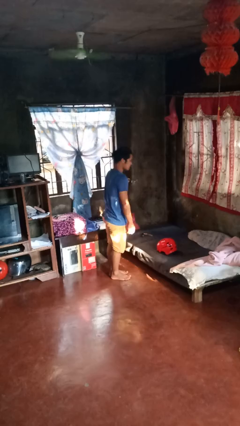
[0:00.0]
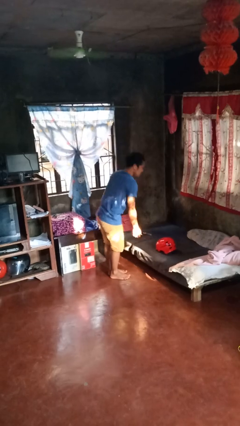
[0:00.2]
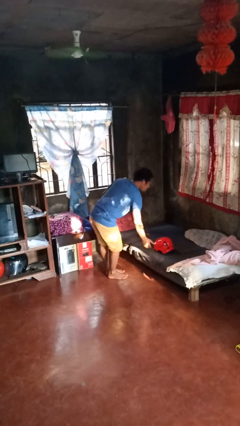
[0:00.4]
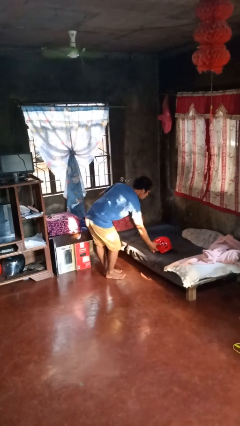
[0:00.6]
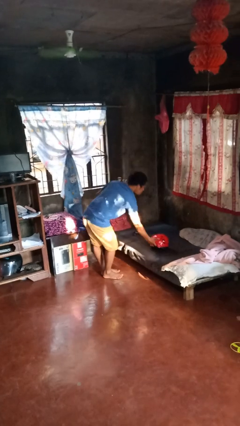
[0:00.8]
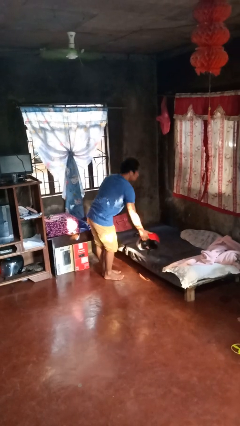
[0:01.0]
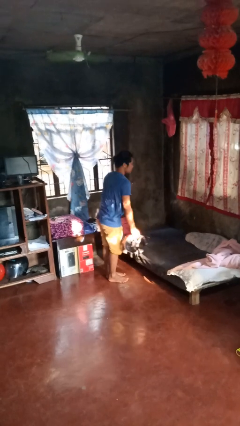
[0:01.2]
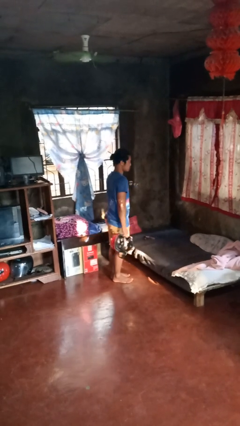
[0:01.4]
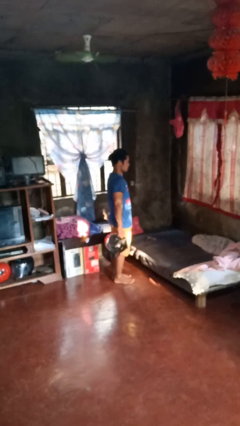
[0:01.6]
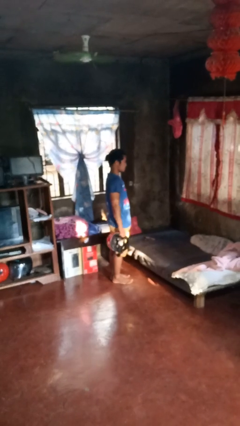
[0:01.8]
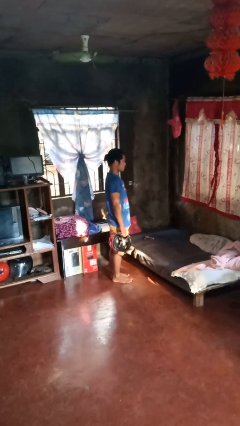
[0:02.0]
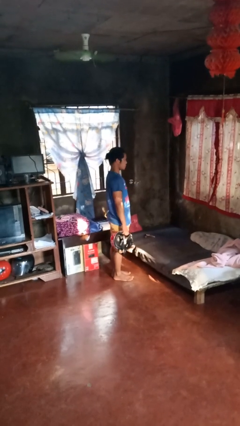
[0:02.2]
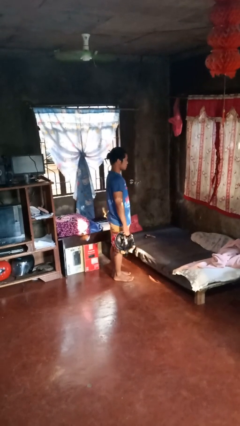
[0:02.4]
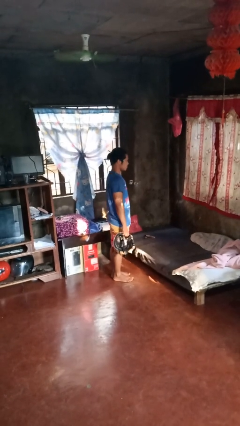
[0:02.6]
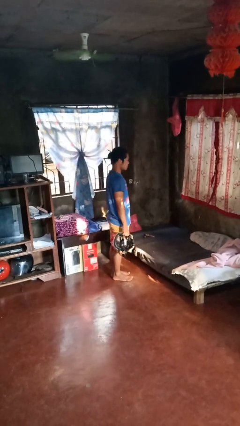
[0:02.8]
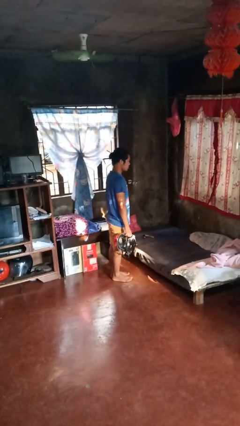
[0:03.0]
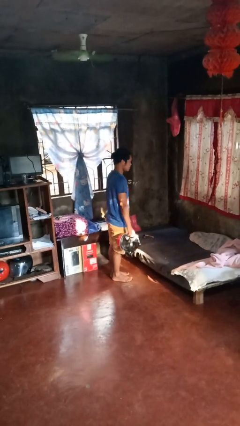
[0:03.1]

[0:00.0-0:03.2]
person picks up object from bed

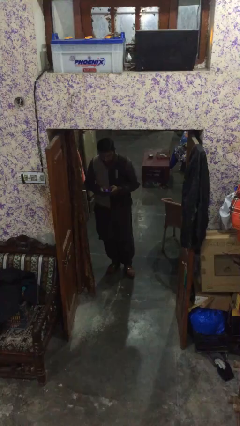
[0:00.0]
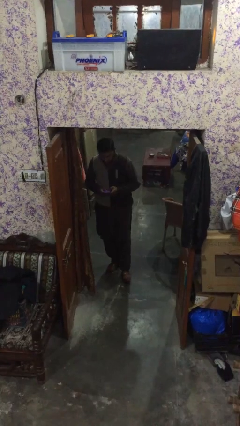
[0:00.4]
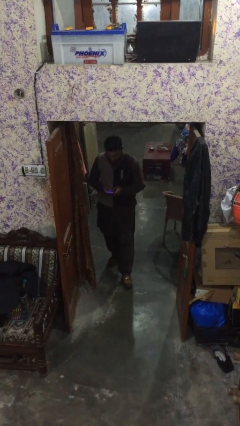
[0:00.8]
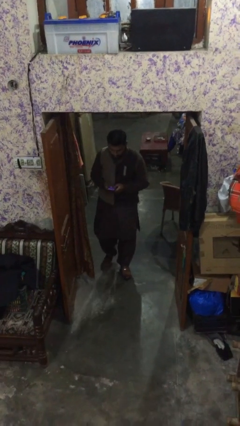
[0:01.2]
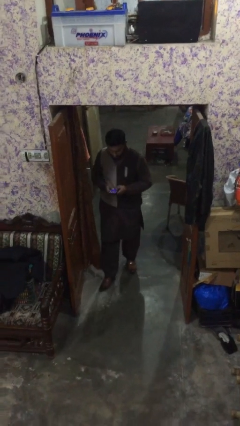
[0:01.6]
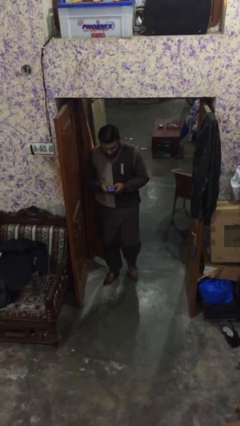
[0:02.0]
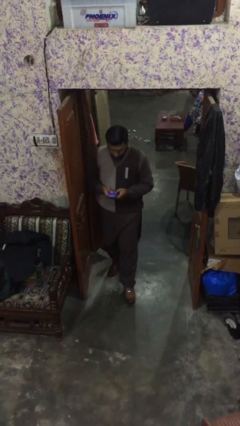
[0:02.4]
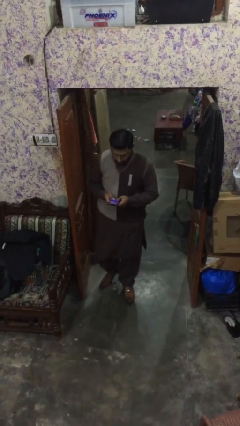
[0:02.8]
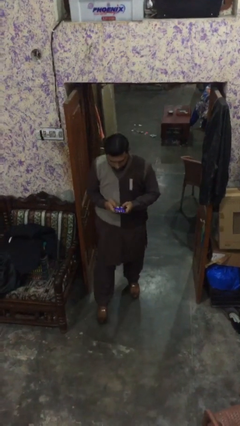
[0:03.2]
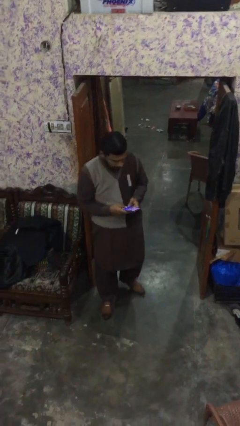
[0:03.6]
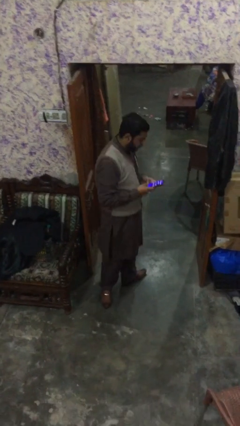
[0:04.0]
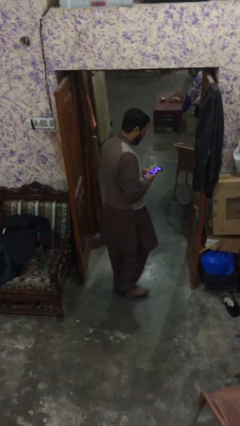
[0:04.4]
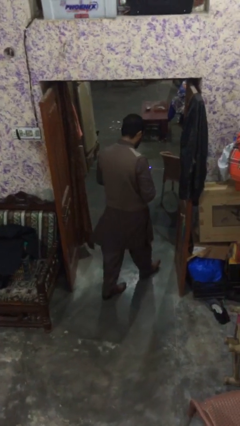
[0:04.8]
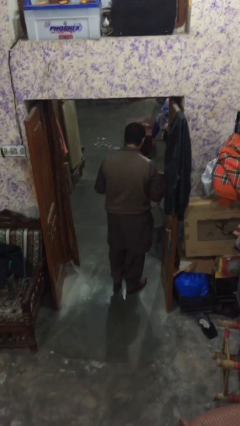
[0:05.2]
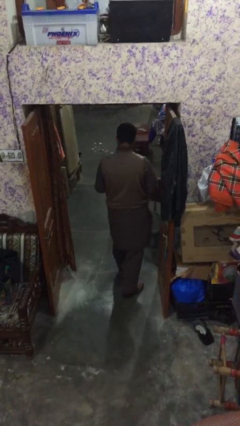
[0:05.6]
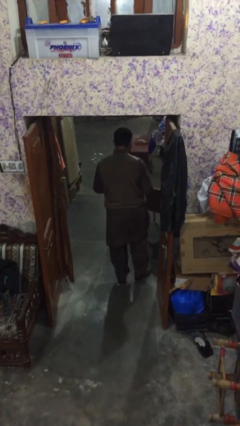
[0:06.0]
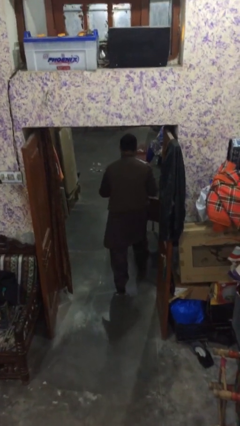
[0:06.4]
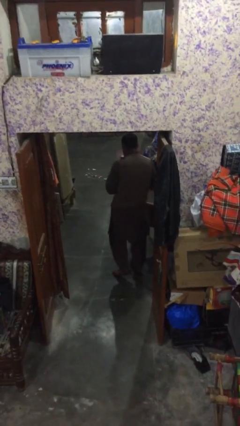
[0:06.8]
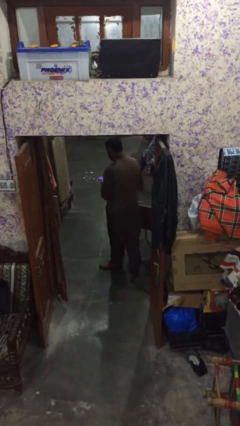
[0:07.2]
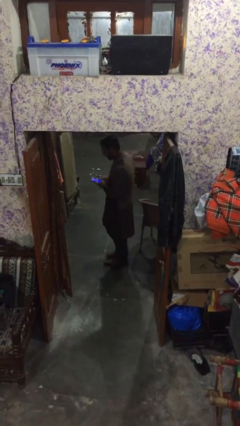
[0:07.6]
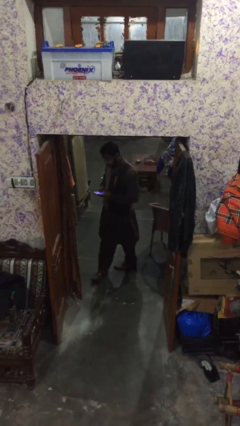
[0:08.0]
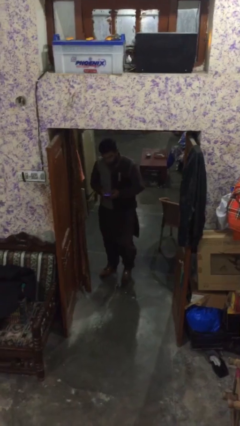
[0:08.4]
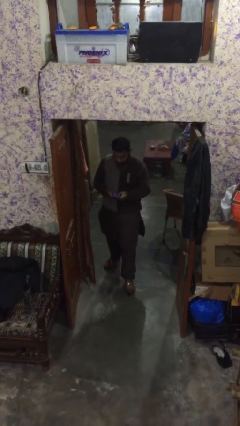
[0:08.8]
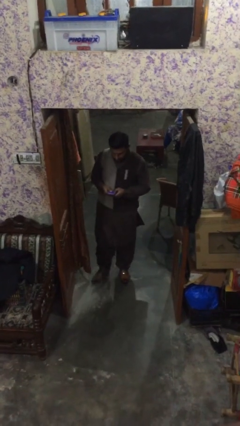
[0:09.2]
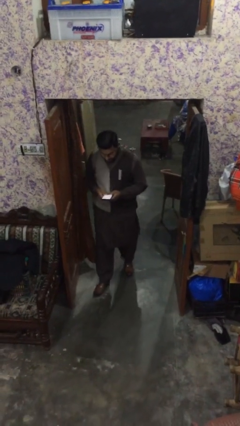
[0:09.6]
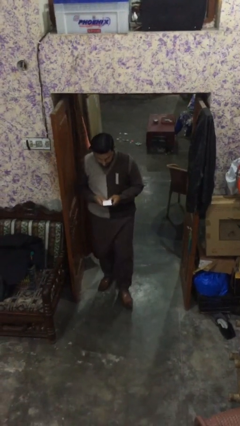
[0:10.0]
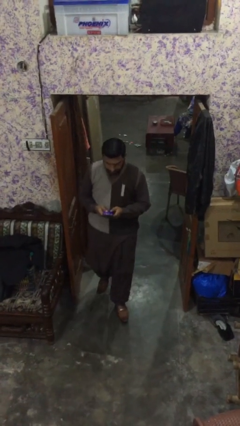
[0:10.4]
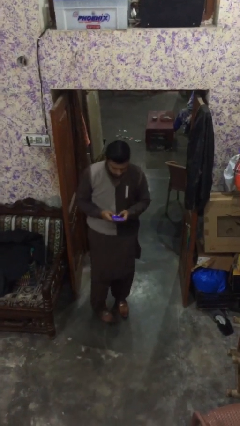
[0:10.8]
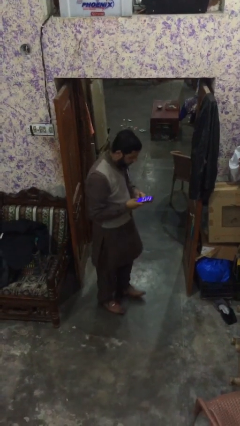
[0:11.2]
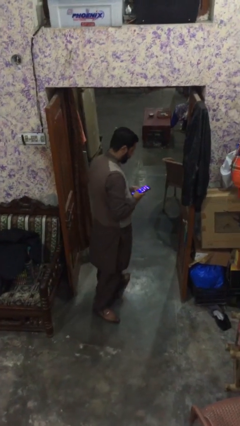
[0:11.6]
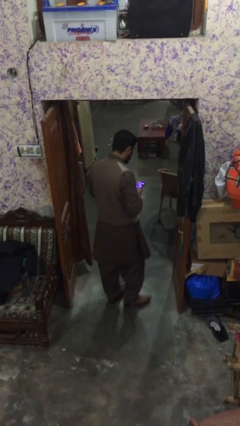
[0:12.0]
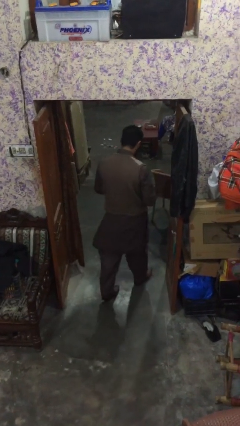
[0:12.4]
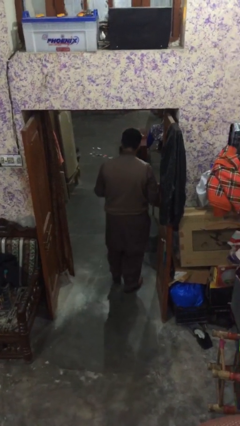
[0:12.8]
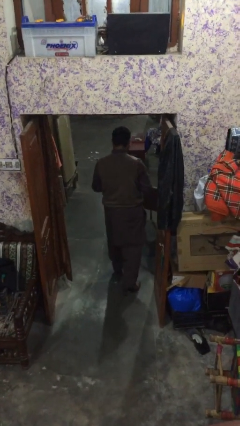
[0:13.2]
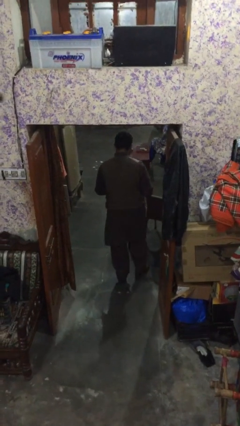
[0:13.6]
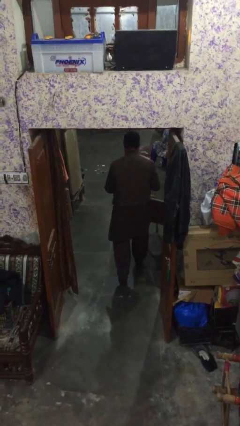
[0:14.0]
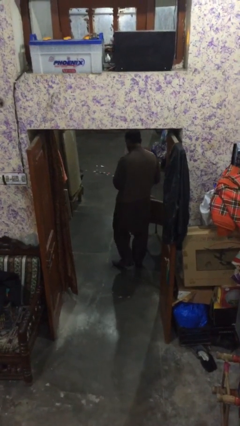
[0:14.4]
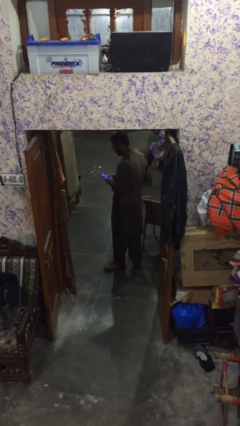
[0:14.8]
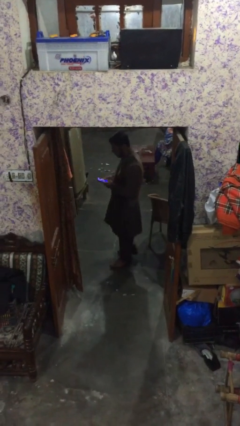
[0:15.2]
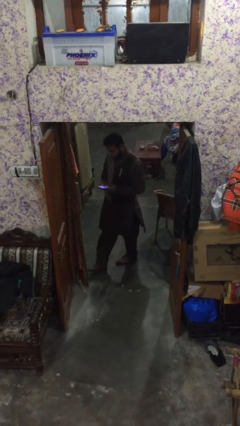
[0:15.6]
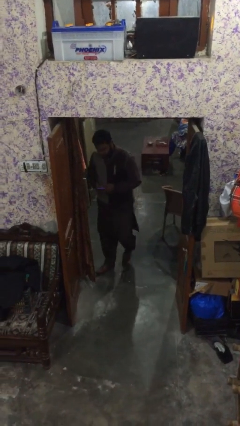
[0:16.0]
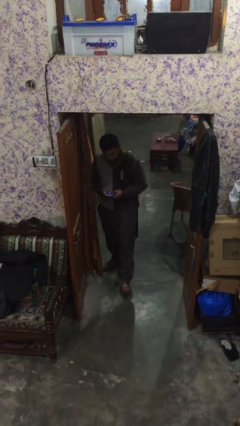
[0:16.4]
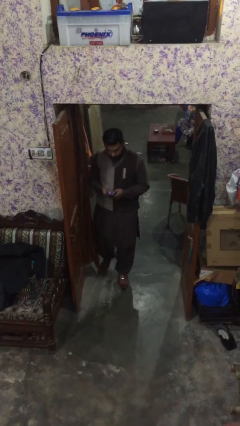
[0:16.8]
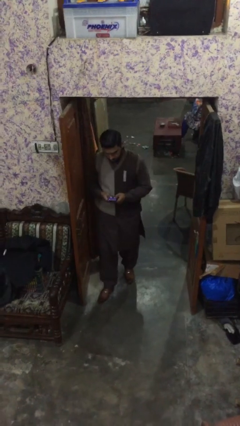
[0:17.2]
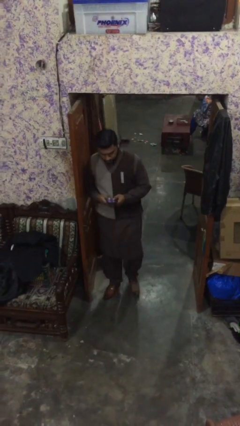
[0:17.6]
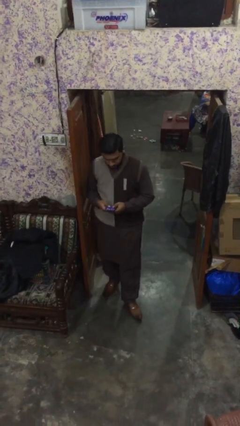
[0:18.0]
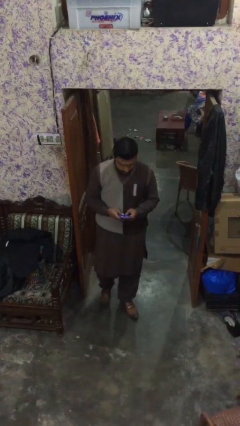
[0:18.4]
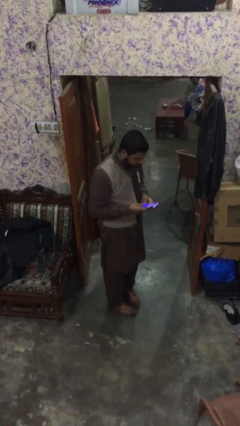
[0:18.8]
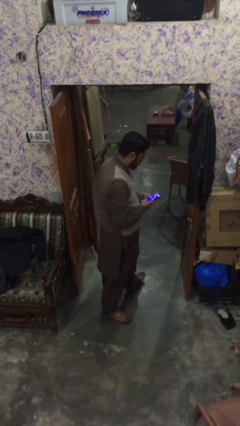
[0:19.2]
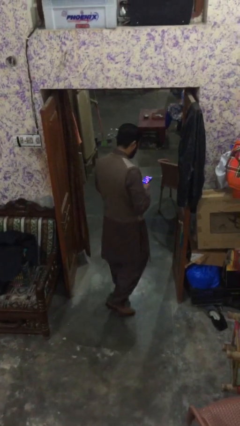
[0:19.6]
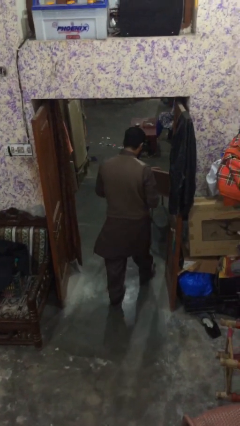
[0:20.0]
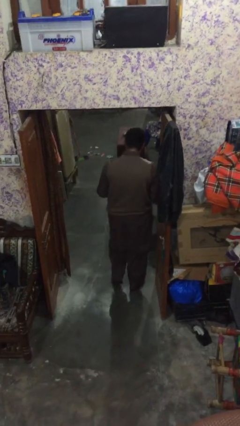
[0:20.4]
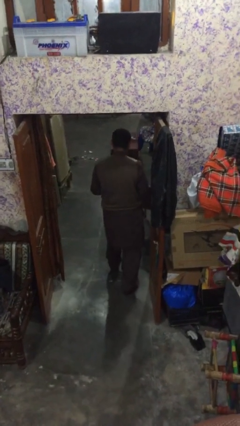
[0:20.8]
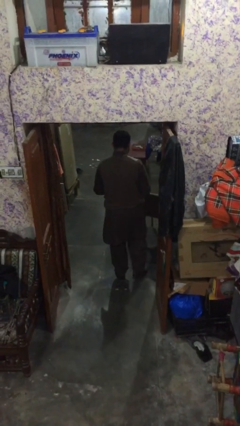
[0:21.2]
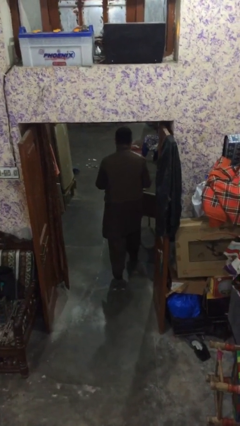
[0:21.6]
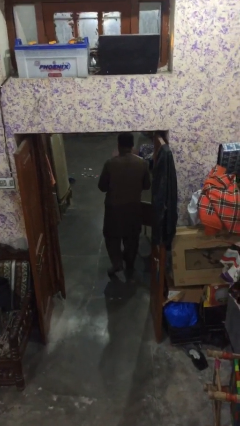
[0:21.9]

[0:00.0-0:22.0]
person texts on phone

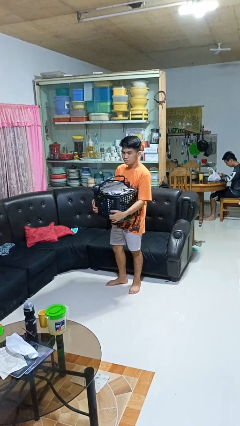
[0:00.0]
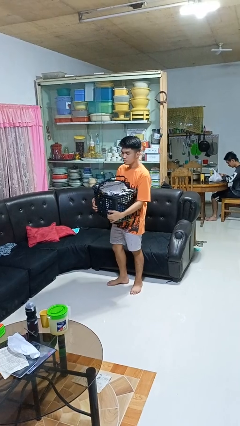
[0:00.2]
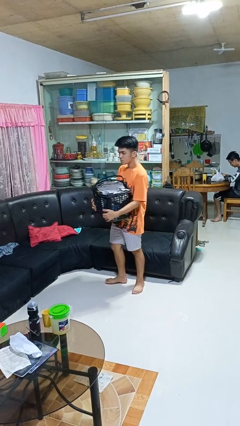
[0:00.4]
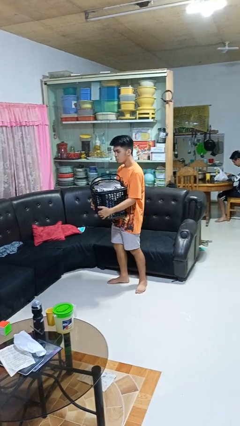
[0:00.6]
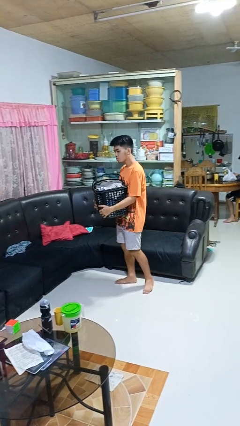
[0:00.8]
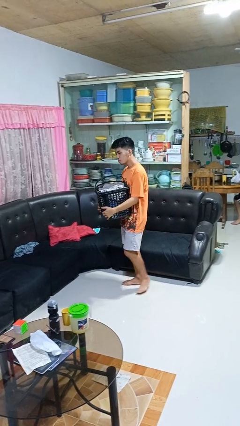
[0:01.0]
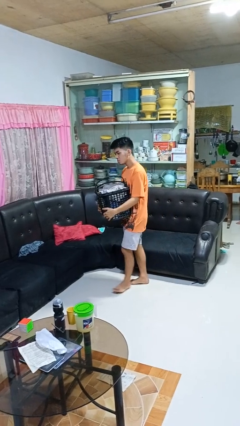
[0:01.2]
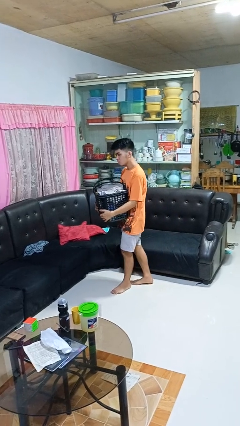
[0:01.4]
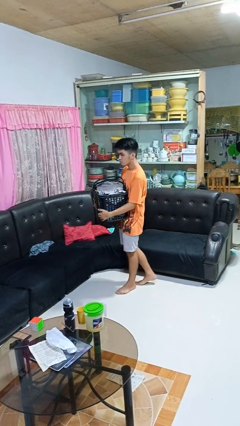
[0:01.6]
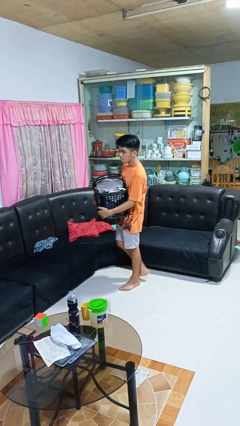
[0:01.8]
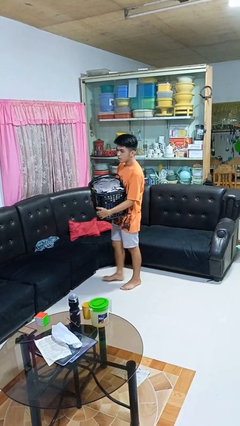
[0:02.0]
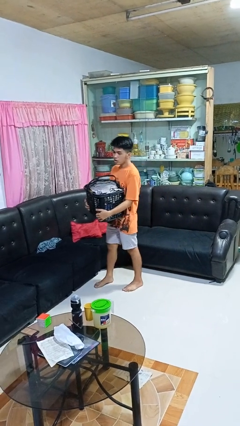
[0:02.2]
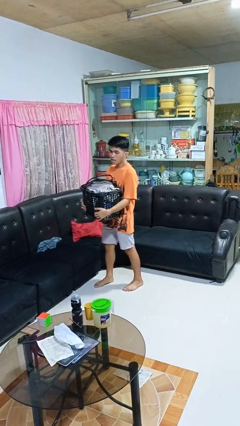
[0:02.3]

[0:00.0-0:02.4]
person carries laundry basket

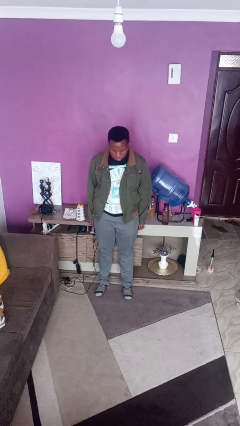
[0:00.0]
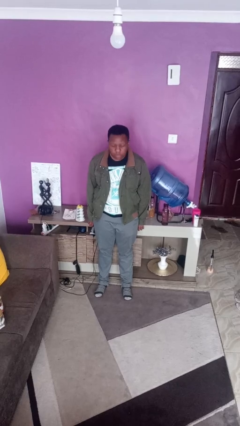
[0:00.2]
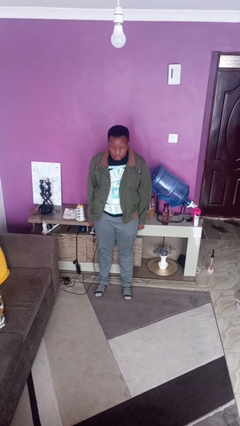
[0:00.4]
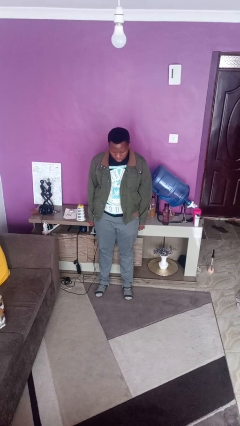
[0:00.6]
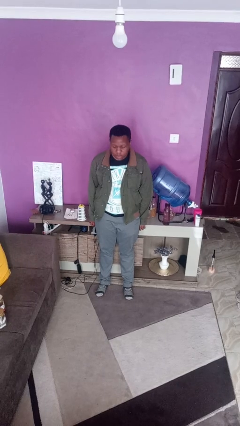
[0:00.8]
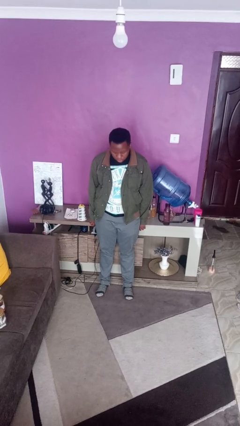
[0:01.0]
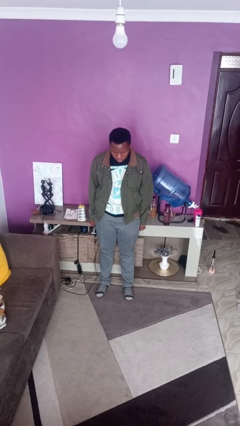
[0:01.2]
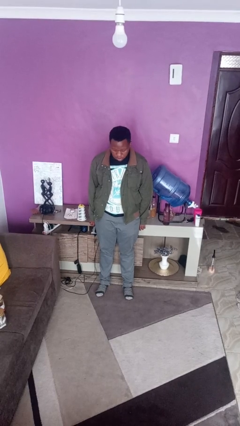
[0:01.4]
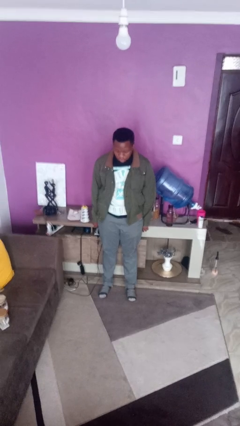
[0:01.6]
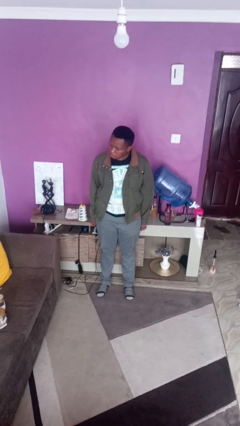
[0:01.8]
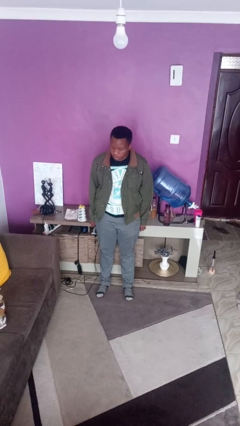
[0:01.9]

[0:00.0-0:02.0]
person nods head
